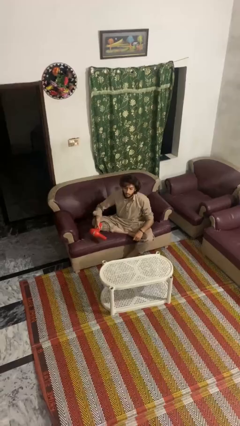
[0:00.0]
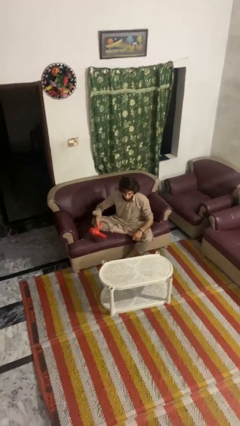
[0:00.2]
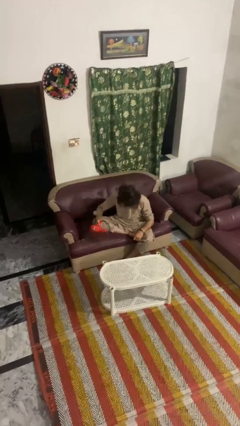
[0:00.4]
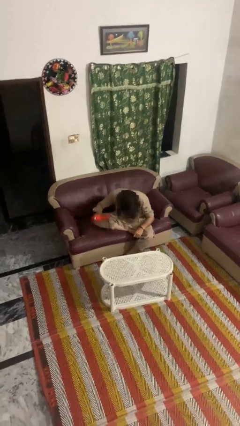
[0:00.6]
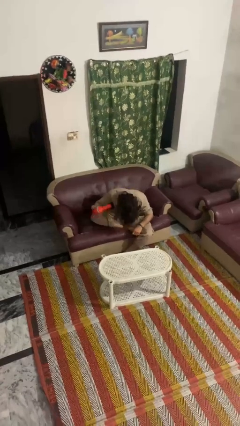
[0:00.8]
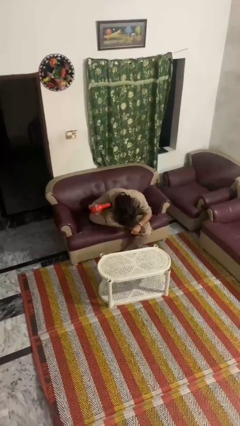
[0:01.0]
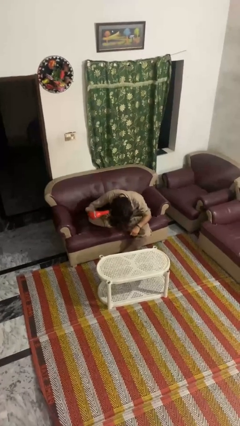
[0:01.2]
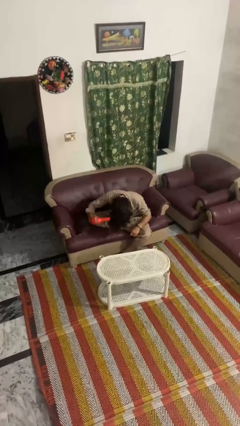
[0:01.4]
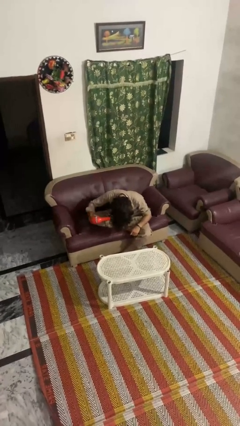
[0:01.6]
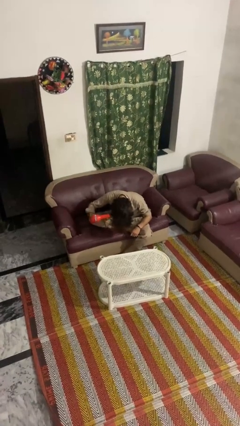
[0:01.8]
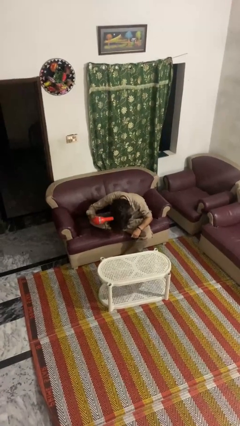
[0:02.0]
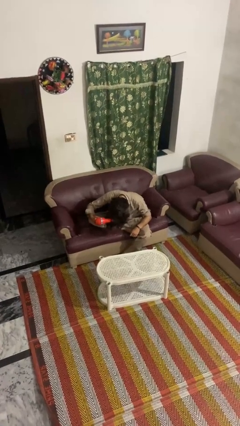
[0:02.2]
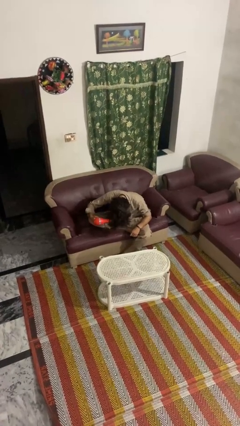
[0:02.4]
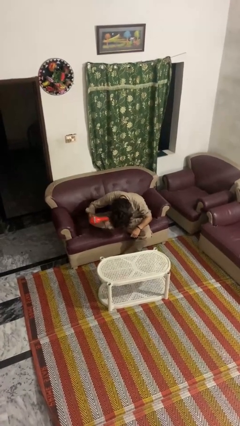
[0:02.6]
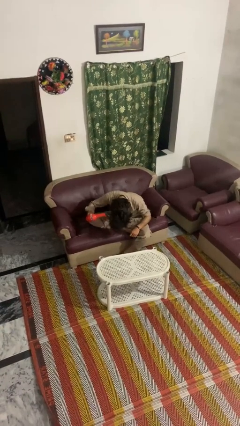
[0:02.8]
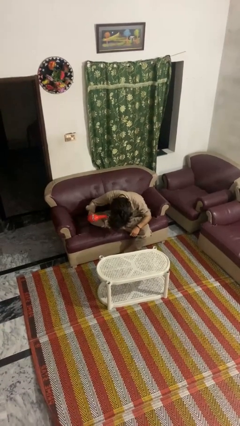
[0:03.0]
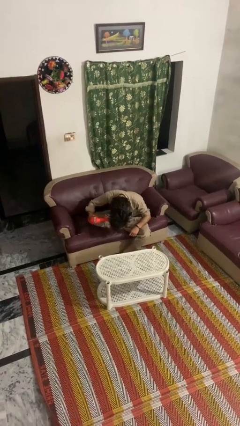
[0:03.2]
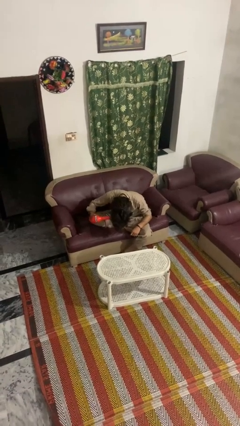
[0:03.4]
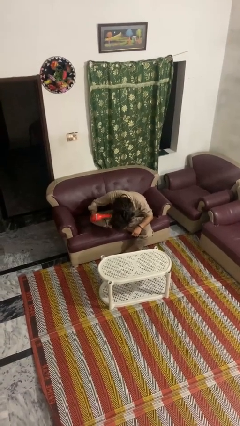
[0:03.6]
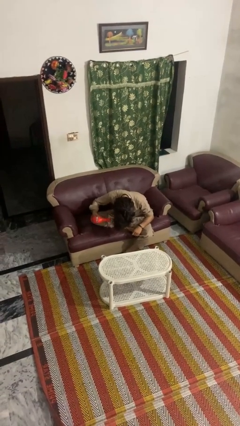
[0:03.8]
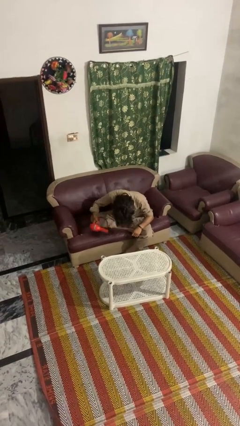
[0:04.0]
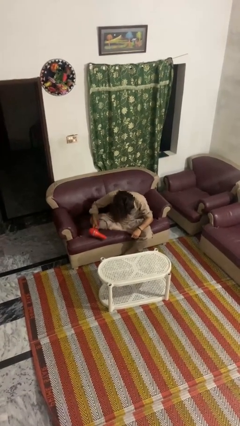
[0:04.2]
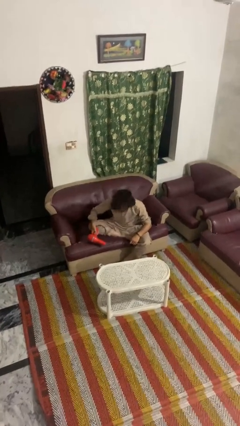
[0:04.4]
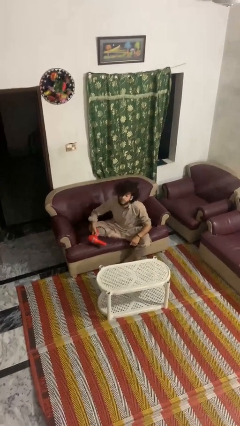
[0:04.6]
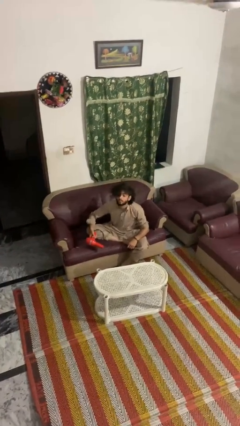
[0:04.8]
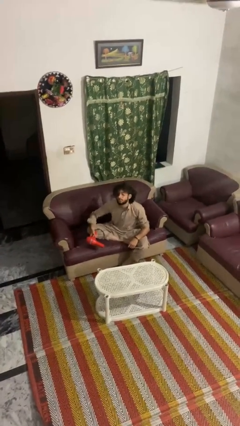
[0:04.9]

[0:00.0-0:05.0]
person dries hair with hairdryer

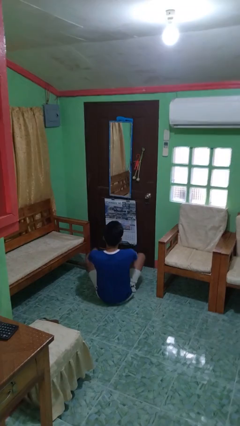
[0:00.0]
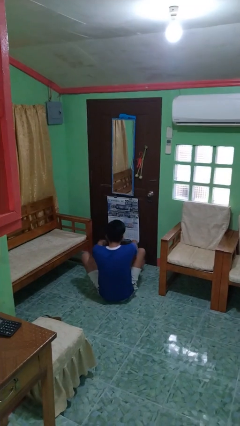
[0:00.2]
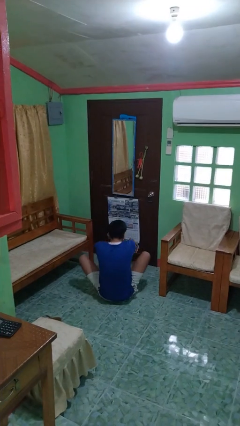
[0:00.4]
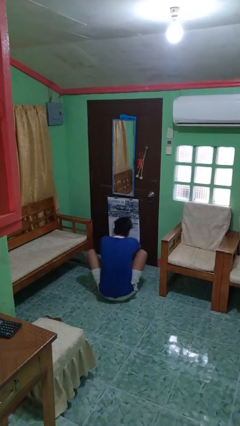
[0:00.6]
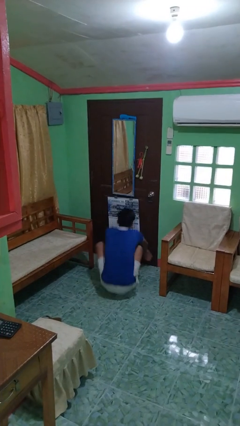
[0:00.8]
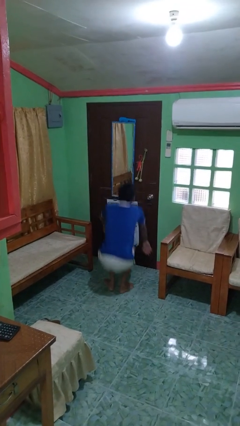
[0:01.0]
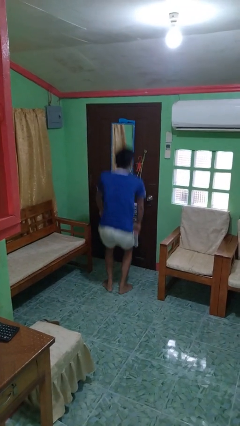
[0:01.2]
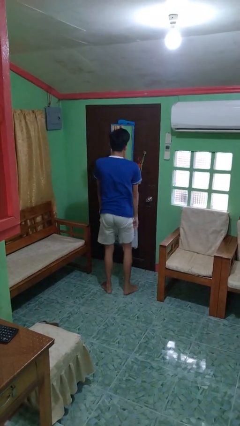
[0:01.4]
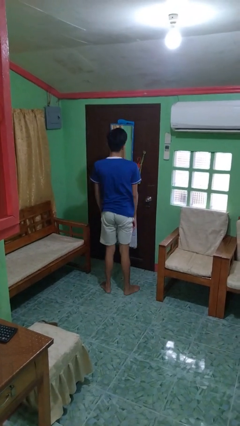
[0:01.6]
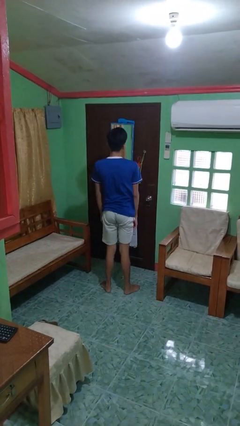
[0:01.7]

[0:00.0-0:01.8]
person stands up from floor

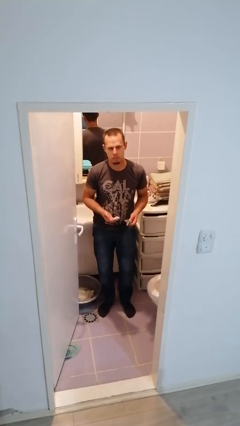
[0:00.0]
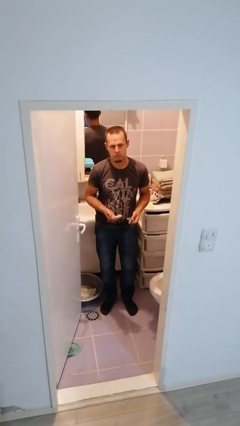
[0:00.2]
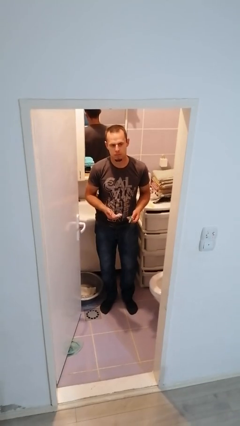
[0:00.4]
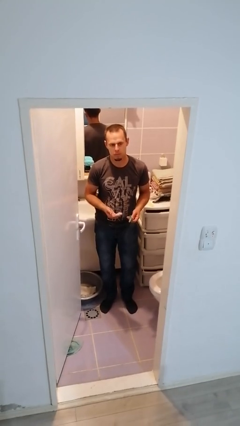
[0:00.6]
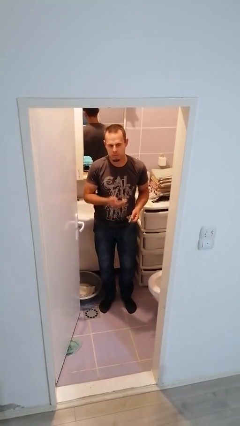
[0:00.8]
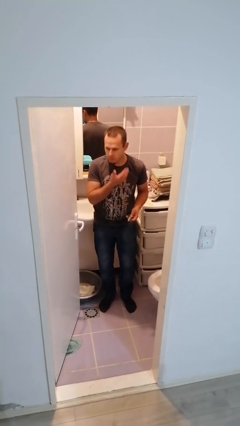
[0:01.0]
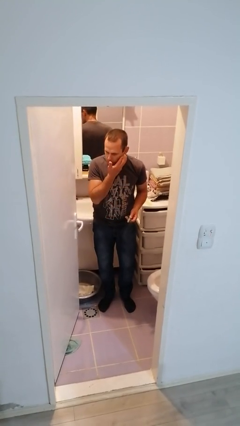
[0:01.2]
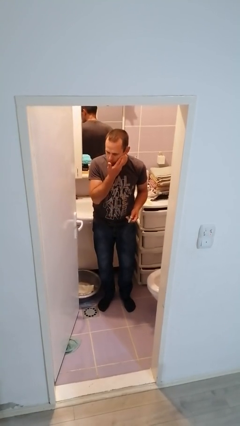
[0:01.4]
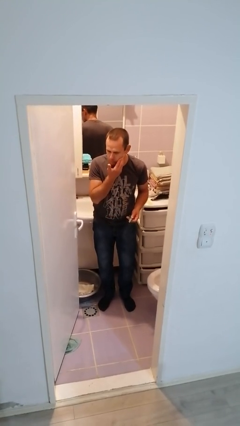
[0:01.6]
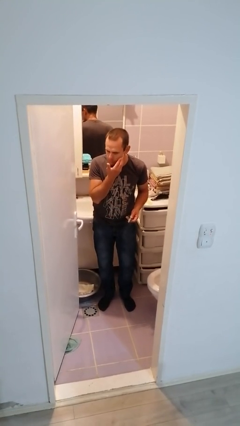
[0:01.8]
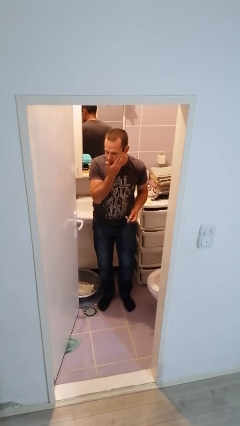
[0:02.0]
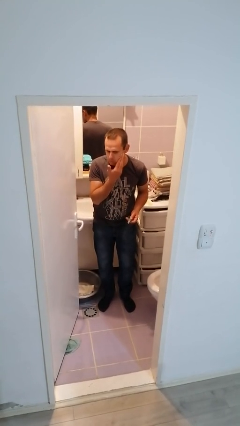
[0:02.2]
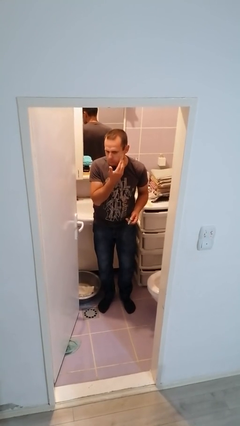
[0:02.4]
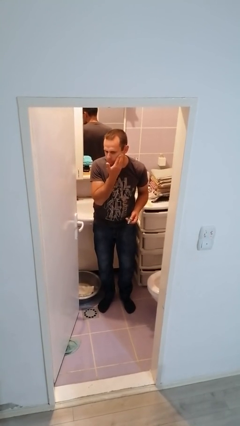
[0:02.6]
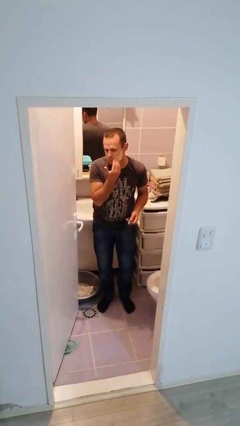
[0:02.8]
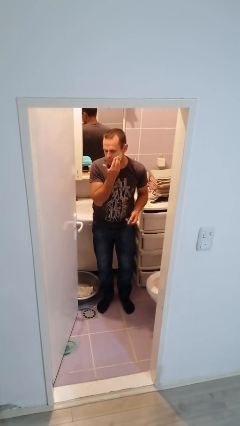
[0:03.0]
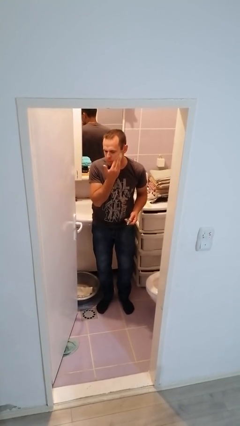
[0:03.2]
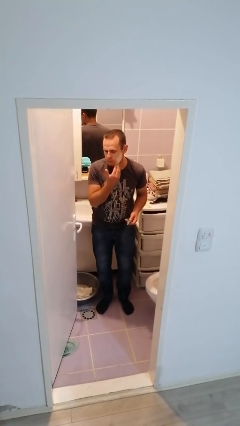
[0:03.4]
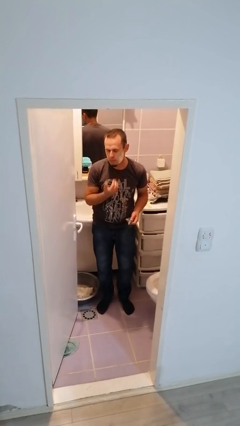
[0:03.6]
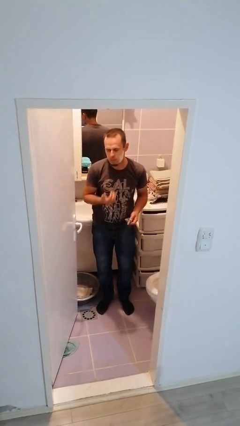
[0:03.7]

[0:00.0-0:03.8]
person applies shaving cream

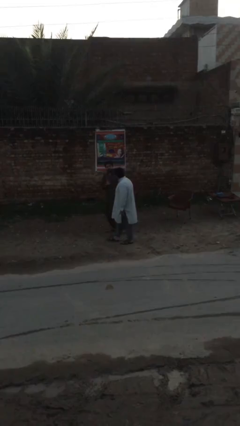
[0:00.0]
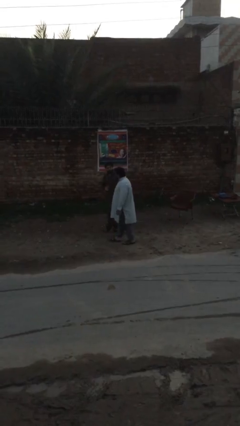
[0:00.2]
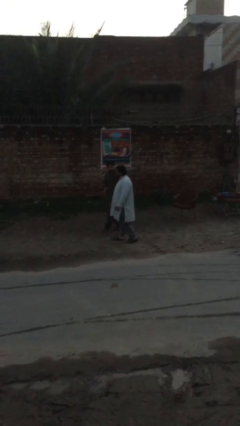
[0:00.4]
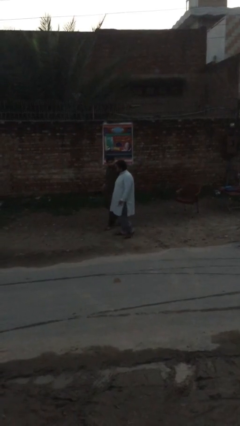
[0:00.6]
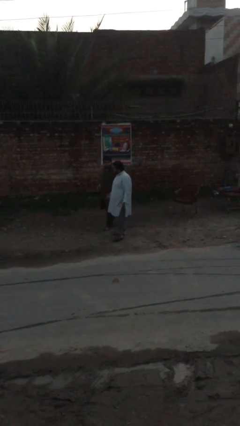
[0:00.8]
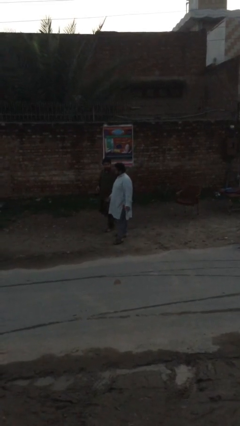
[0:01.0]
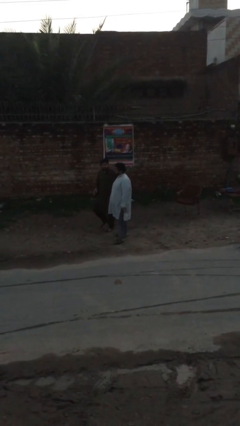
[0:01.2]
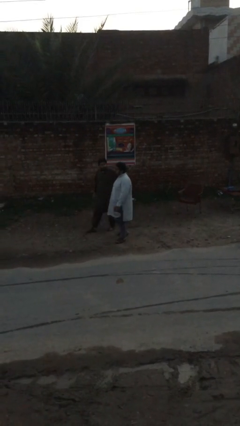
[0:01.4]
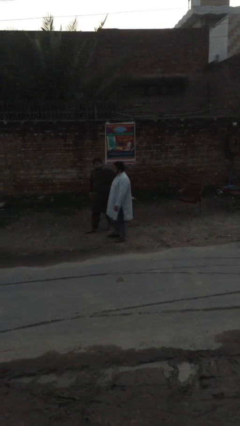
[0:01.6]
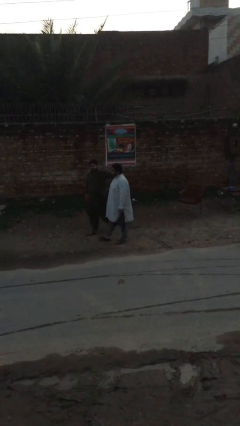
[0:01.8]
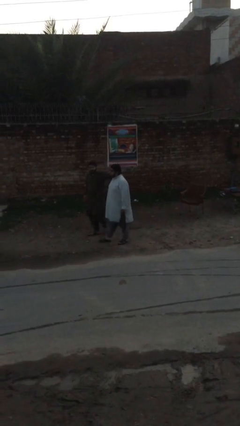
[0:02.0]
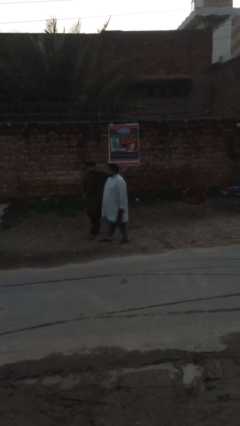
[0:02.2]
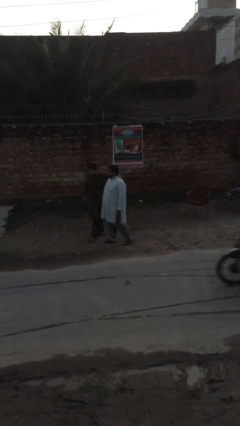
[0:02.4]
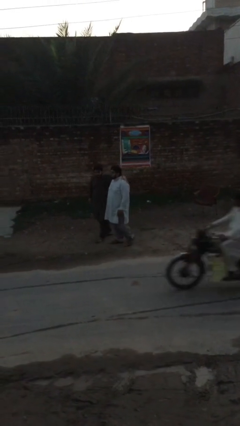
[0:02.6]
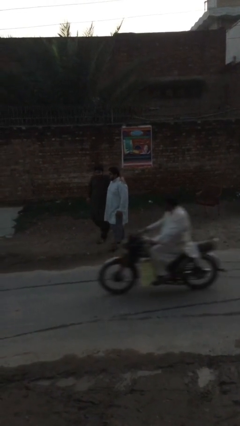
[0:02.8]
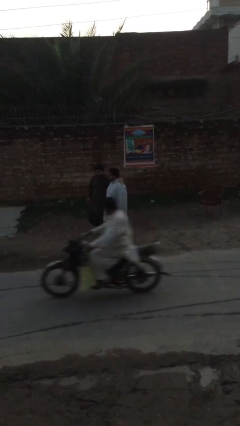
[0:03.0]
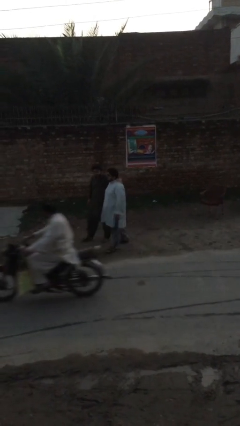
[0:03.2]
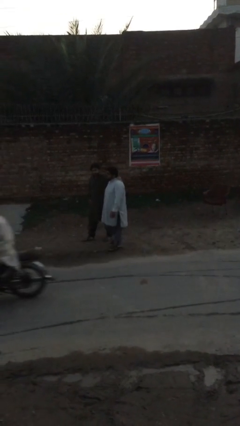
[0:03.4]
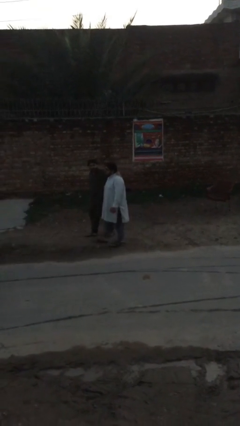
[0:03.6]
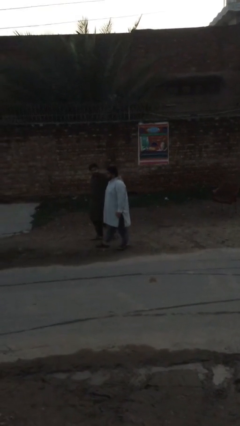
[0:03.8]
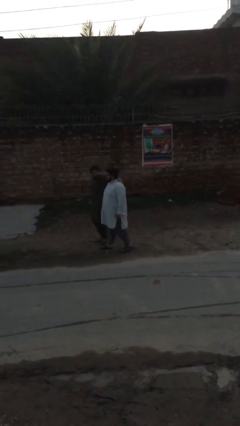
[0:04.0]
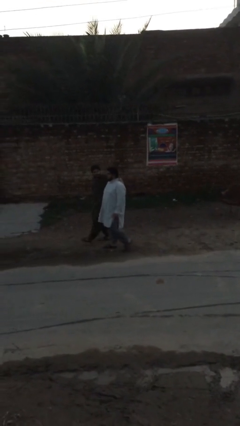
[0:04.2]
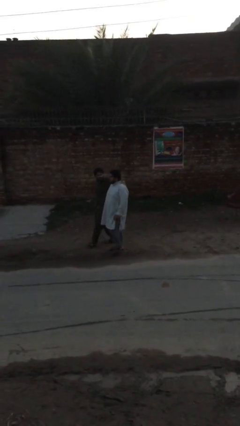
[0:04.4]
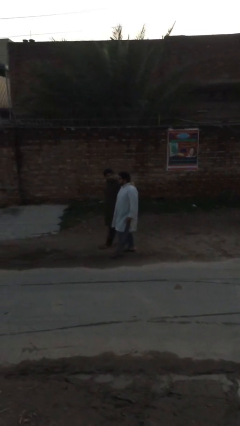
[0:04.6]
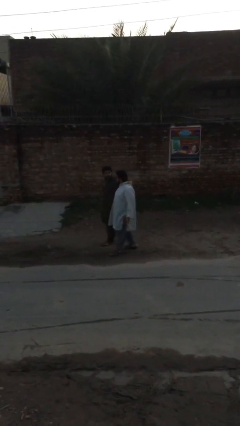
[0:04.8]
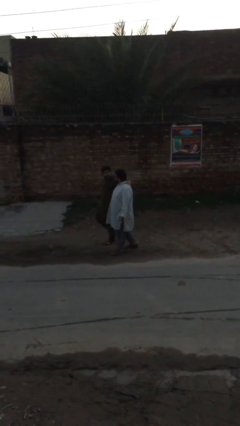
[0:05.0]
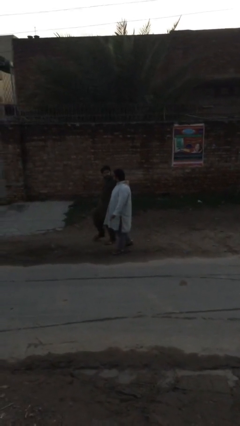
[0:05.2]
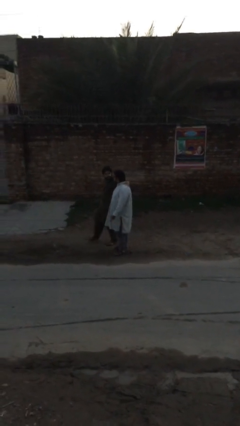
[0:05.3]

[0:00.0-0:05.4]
person talks to person

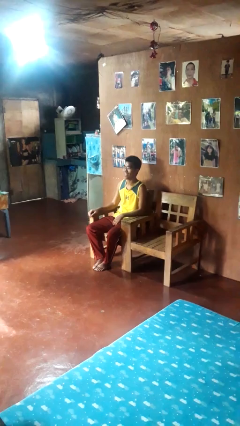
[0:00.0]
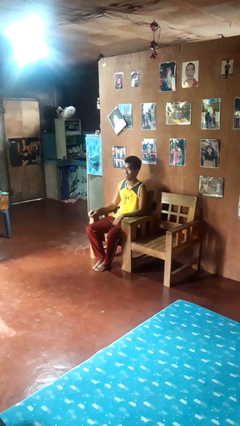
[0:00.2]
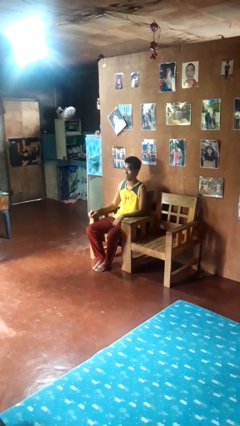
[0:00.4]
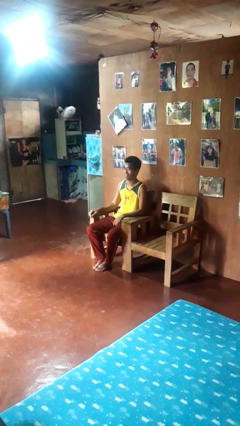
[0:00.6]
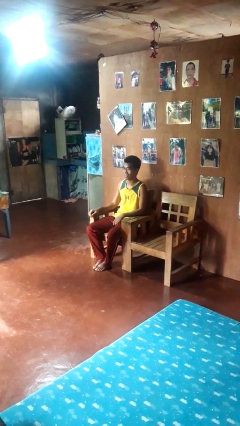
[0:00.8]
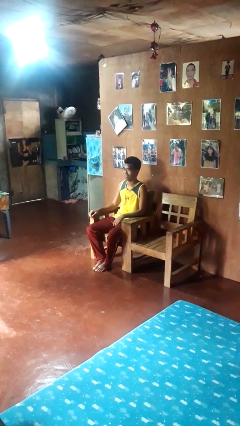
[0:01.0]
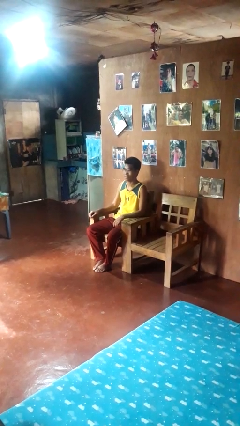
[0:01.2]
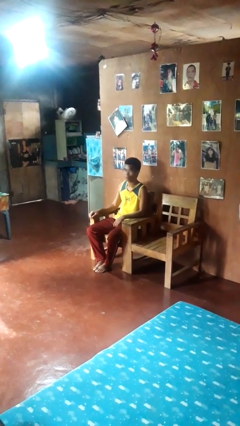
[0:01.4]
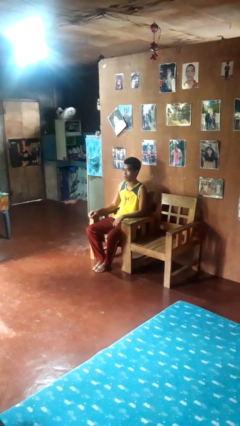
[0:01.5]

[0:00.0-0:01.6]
person nods head
